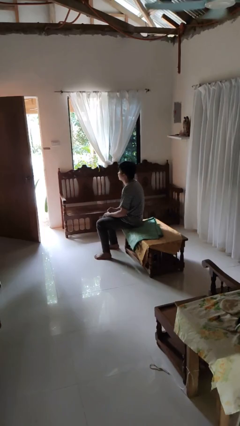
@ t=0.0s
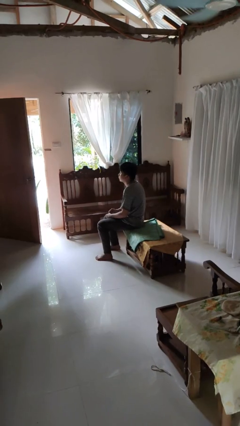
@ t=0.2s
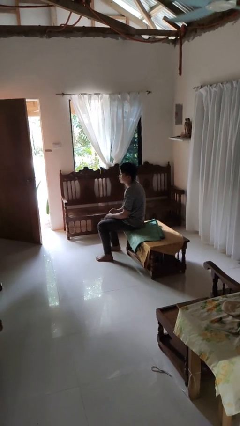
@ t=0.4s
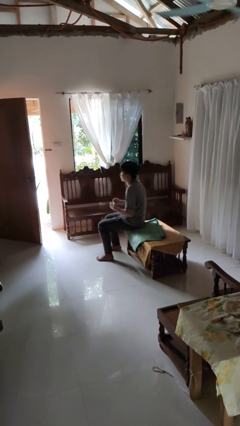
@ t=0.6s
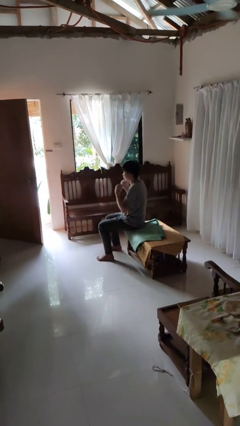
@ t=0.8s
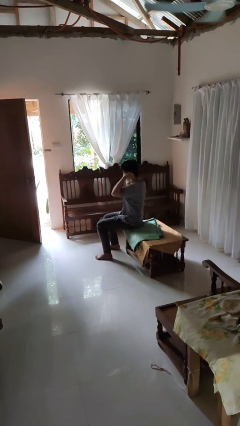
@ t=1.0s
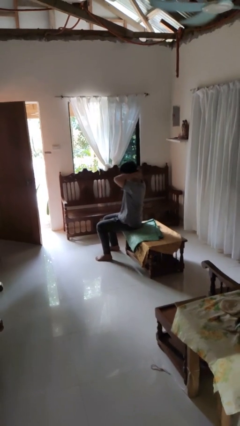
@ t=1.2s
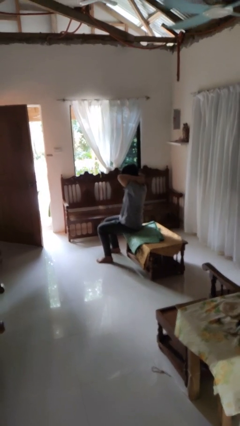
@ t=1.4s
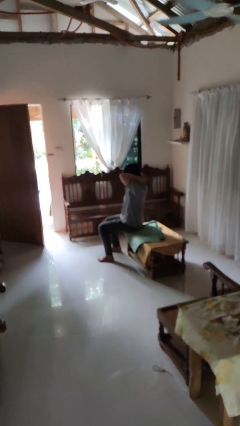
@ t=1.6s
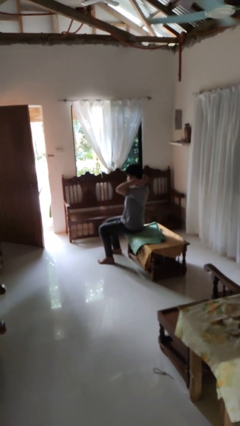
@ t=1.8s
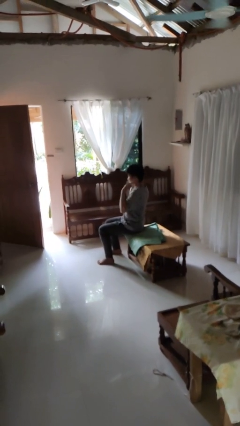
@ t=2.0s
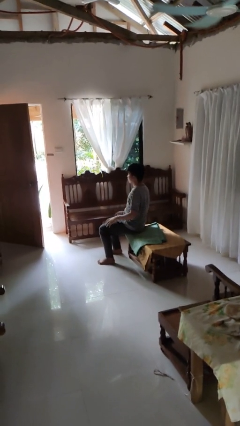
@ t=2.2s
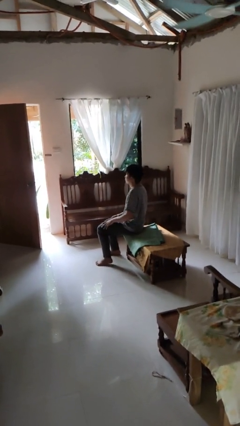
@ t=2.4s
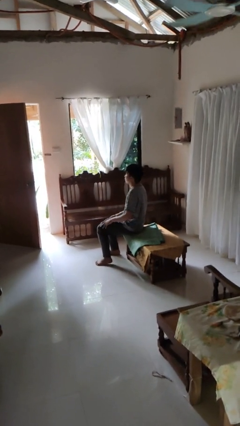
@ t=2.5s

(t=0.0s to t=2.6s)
person puts on necklace

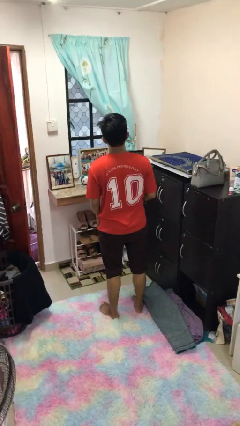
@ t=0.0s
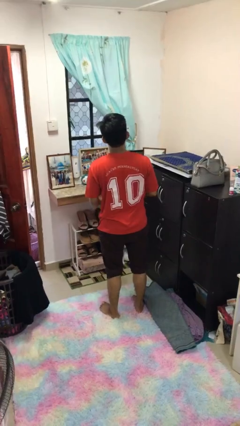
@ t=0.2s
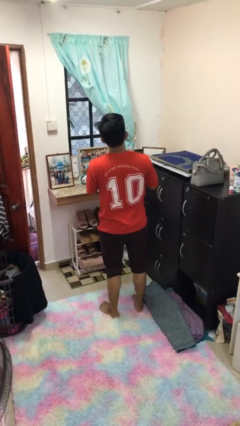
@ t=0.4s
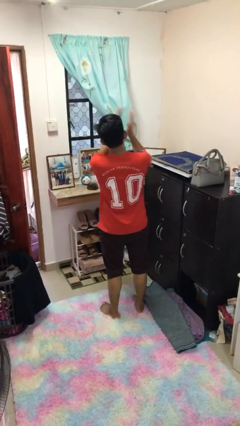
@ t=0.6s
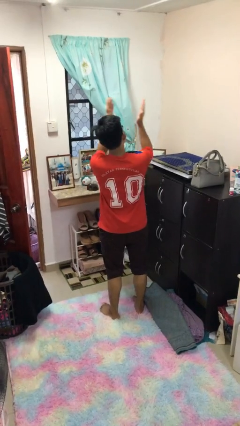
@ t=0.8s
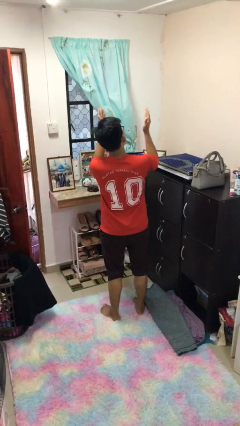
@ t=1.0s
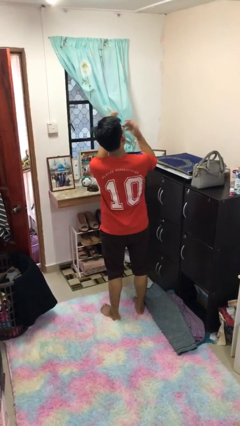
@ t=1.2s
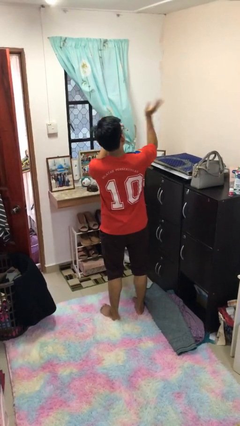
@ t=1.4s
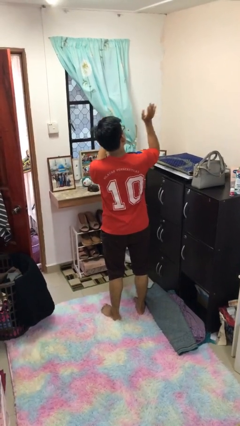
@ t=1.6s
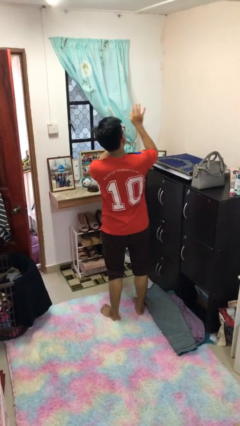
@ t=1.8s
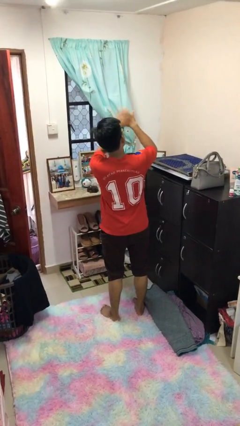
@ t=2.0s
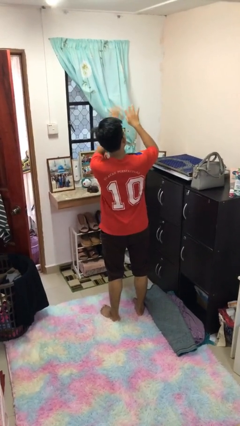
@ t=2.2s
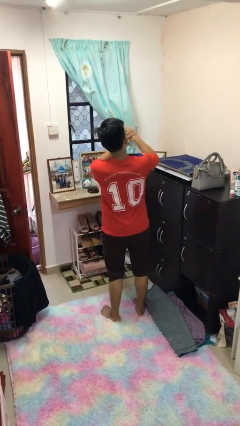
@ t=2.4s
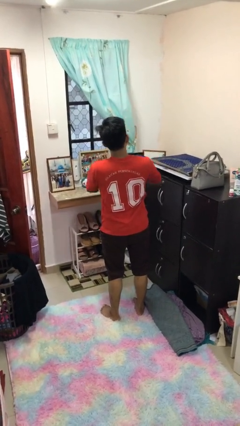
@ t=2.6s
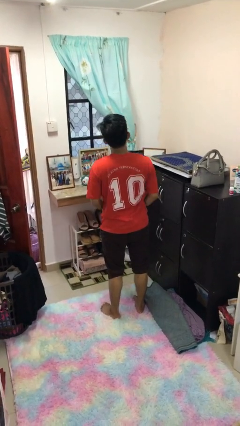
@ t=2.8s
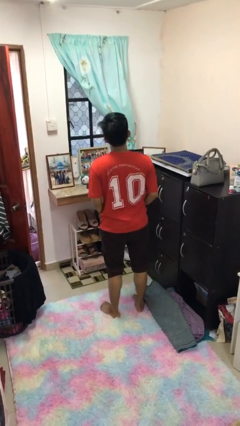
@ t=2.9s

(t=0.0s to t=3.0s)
person swats bug

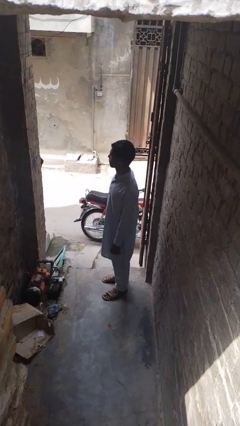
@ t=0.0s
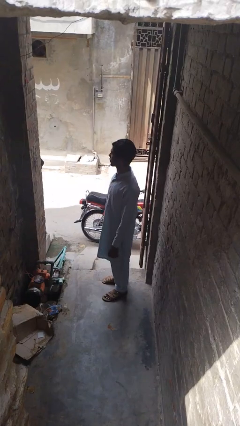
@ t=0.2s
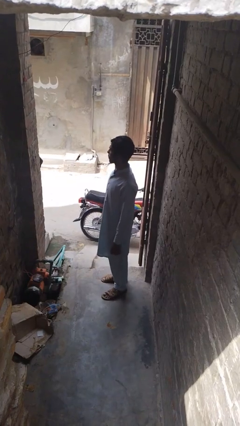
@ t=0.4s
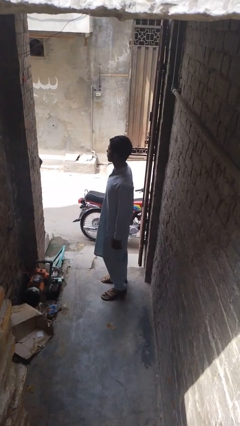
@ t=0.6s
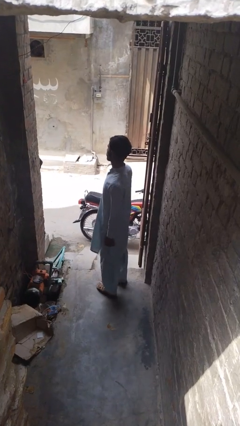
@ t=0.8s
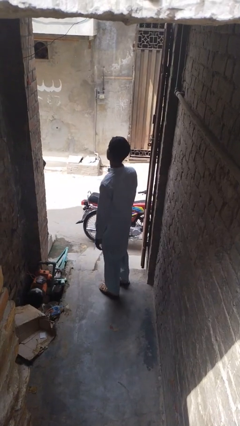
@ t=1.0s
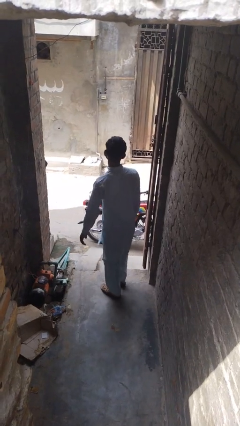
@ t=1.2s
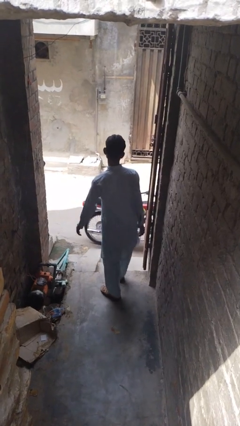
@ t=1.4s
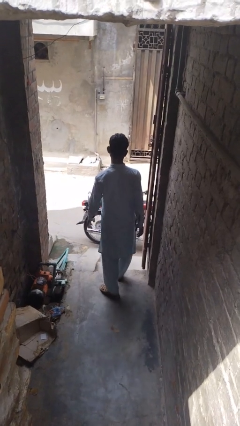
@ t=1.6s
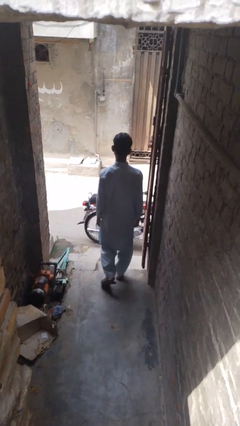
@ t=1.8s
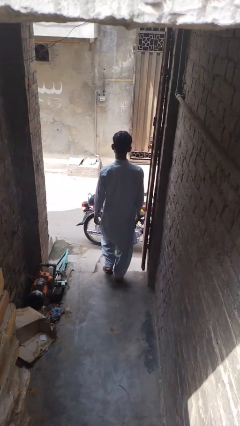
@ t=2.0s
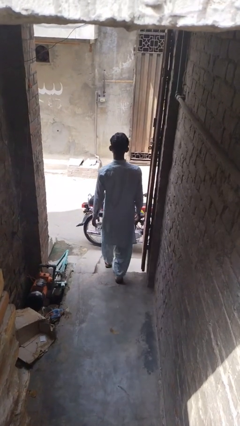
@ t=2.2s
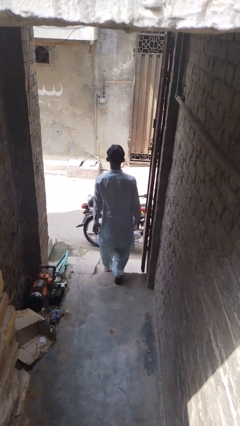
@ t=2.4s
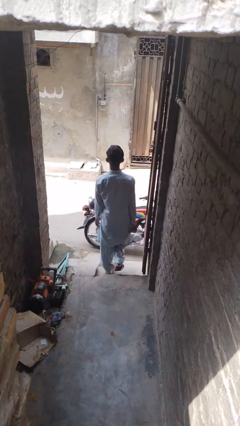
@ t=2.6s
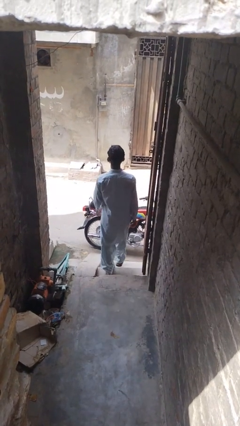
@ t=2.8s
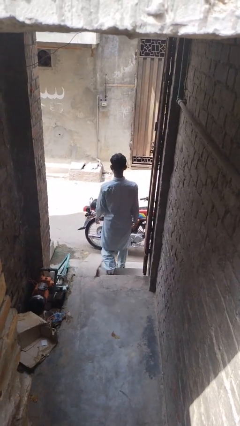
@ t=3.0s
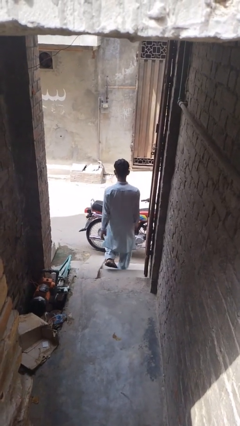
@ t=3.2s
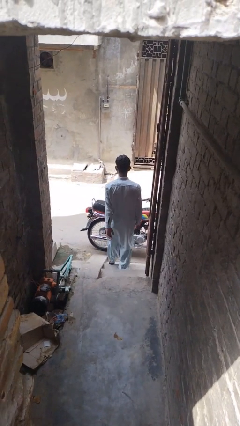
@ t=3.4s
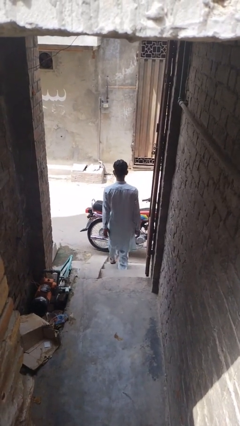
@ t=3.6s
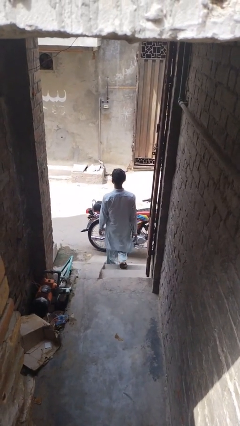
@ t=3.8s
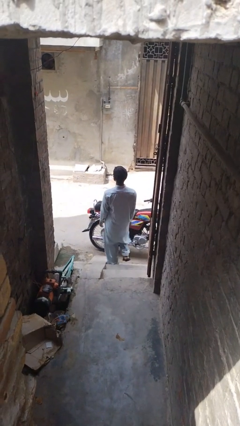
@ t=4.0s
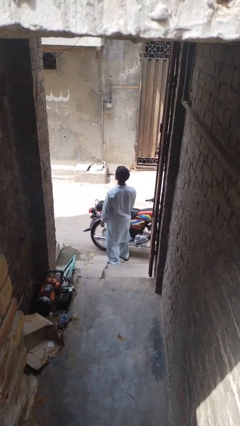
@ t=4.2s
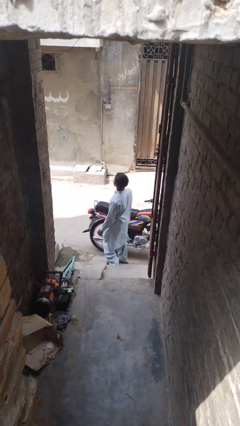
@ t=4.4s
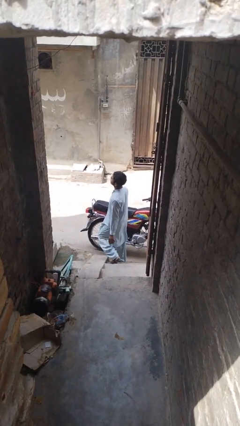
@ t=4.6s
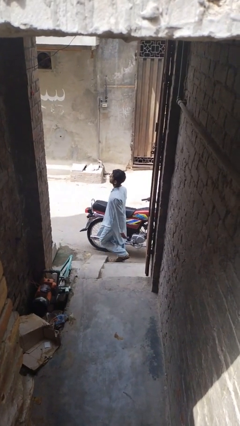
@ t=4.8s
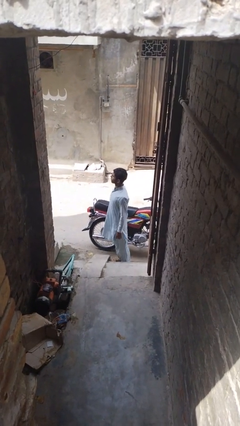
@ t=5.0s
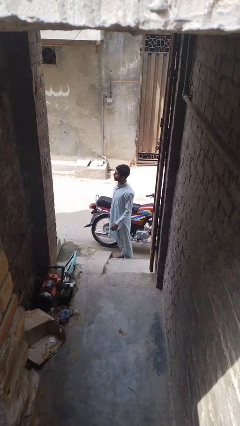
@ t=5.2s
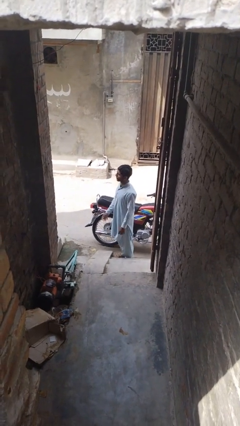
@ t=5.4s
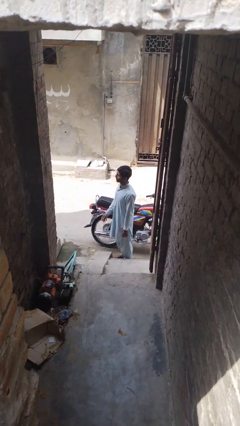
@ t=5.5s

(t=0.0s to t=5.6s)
person climbs down stairs

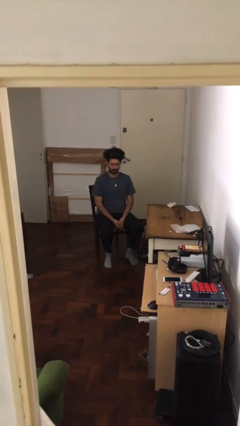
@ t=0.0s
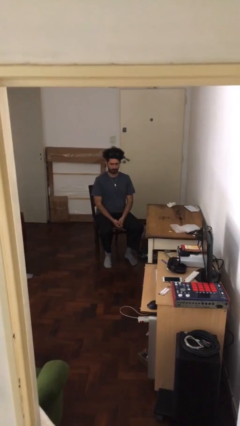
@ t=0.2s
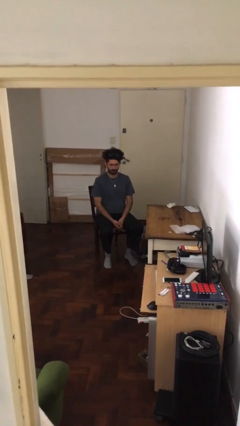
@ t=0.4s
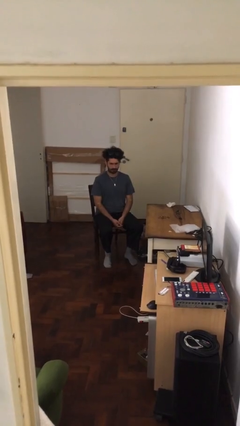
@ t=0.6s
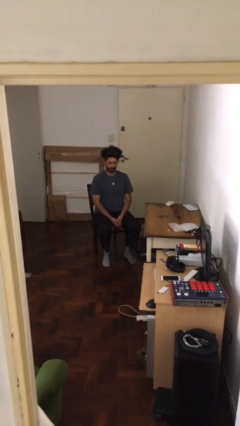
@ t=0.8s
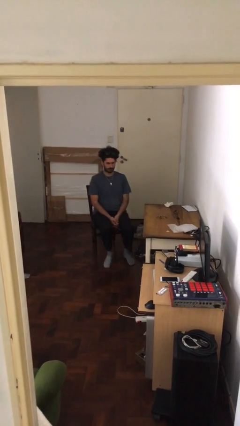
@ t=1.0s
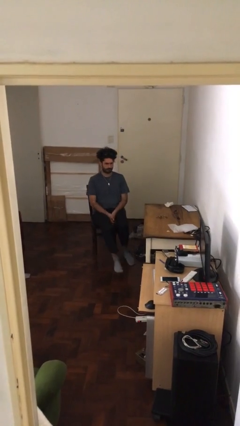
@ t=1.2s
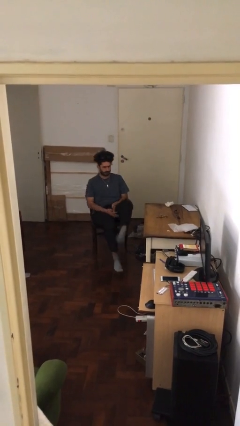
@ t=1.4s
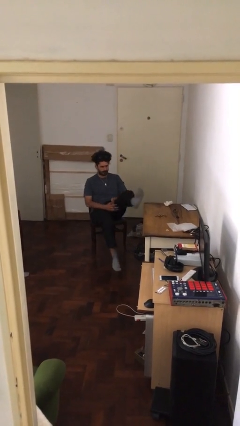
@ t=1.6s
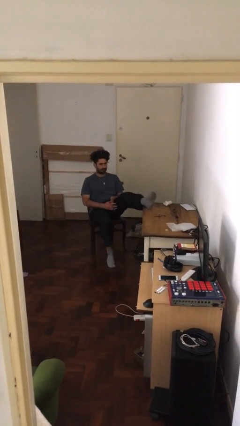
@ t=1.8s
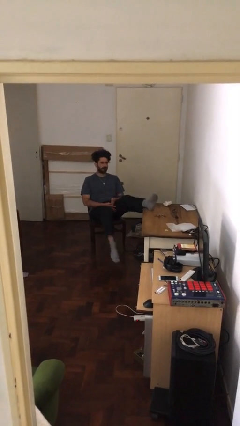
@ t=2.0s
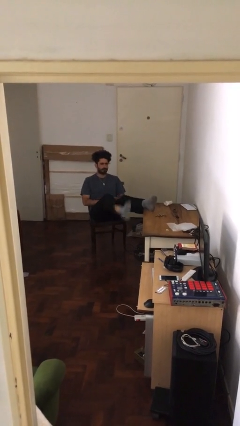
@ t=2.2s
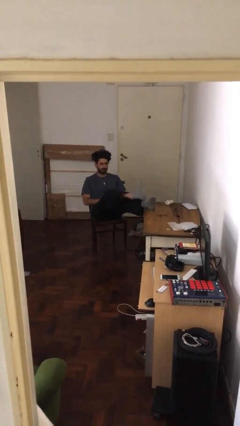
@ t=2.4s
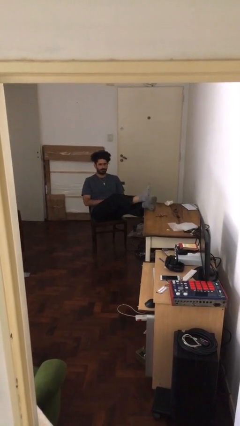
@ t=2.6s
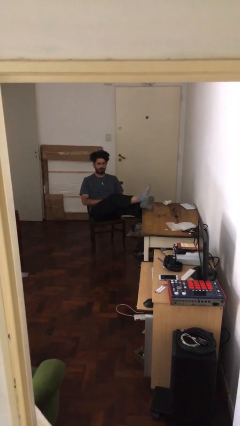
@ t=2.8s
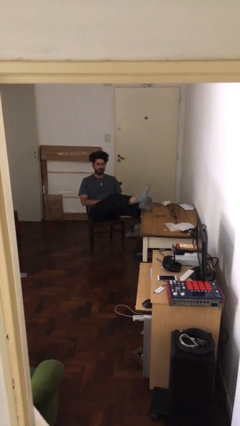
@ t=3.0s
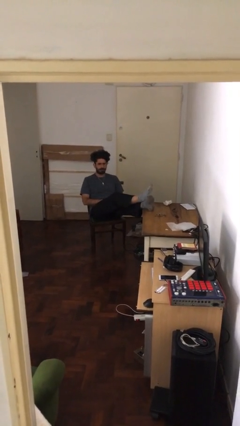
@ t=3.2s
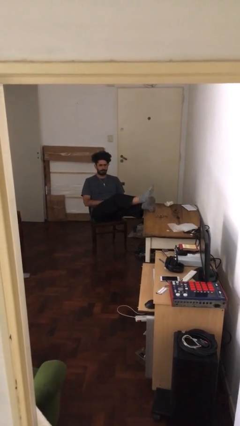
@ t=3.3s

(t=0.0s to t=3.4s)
person puts feet up

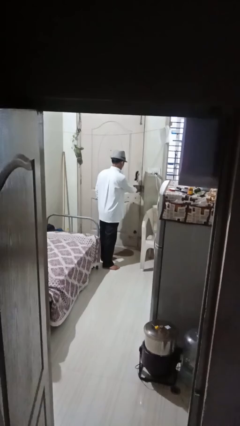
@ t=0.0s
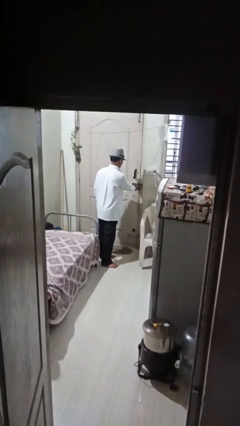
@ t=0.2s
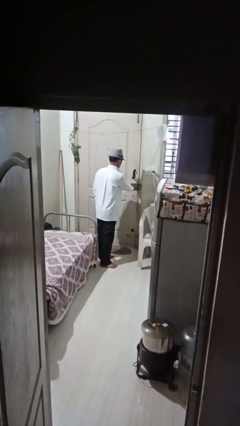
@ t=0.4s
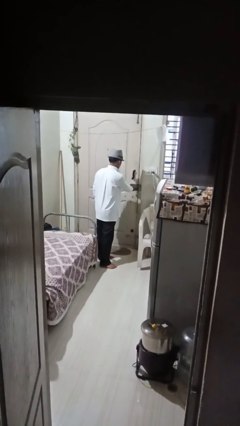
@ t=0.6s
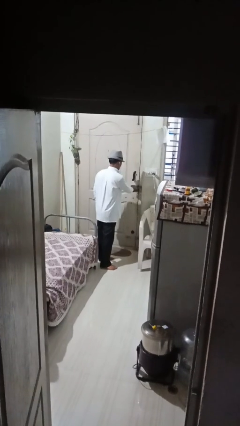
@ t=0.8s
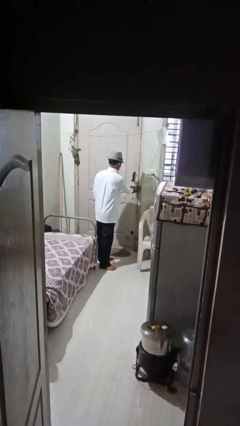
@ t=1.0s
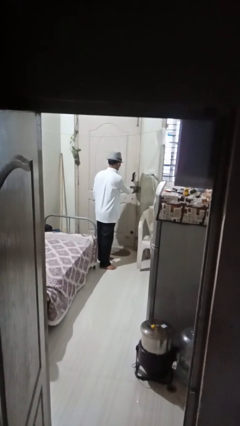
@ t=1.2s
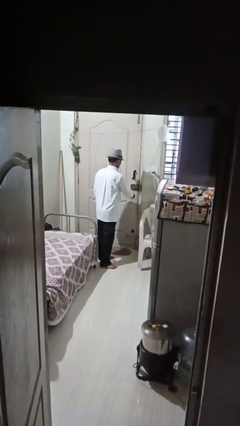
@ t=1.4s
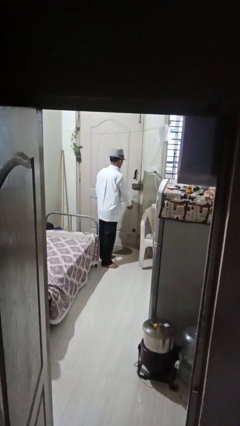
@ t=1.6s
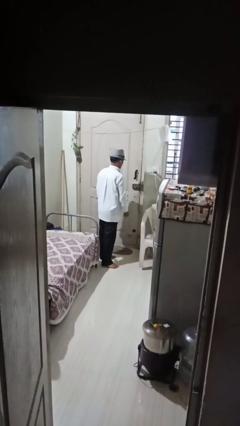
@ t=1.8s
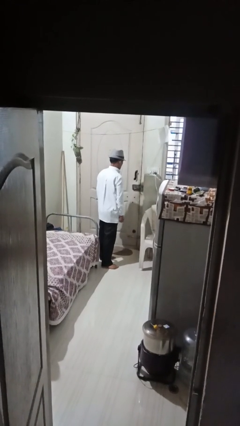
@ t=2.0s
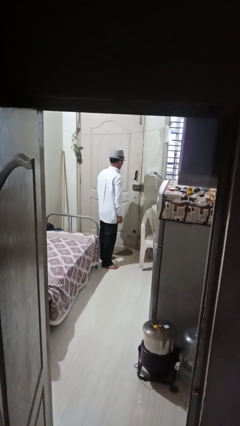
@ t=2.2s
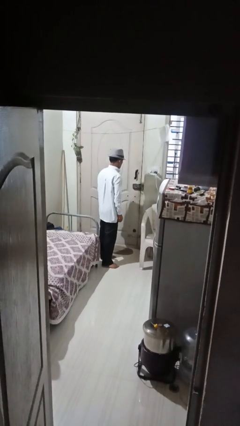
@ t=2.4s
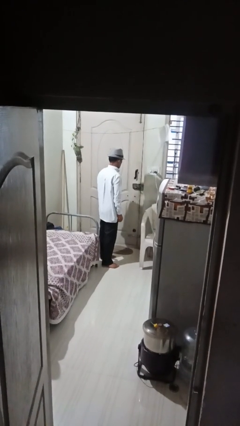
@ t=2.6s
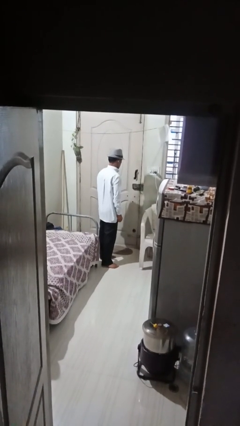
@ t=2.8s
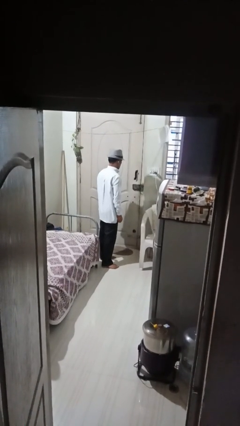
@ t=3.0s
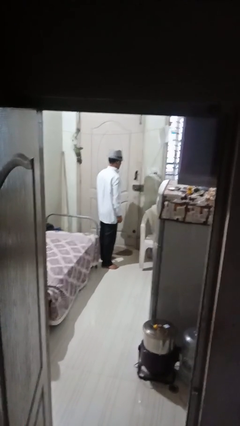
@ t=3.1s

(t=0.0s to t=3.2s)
person locks door with keys
